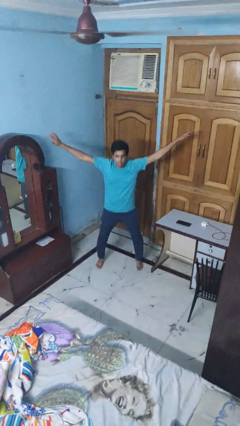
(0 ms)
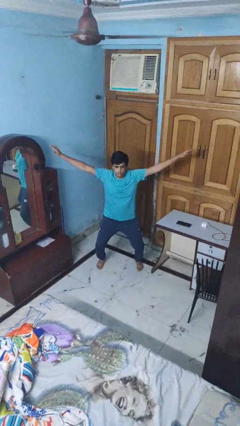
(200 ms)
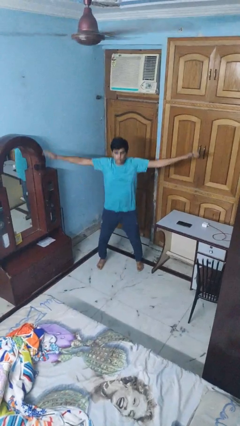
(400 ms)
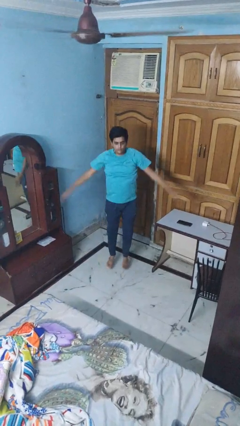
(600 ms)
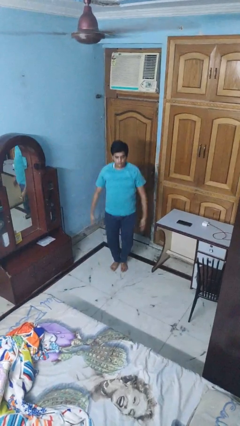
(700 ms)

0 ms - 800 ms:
person exercises with jumping jacks

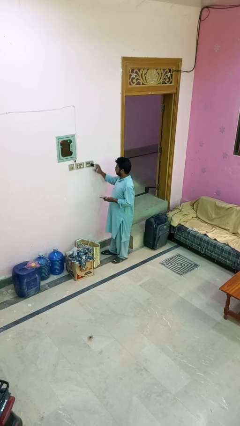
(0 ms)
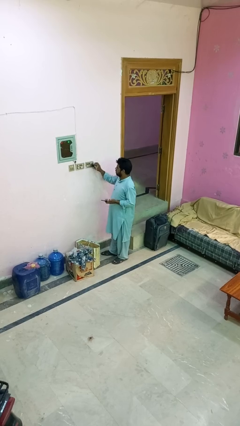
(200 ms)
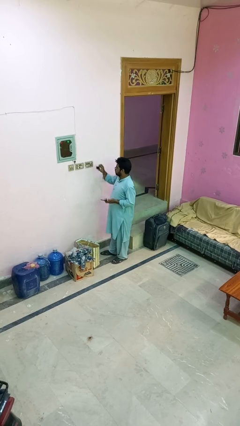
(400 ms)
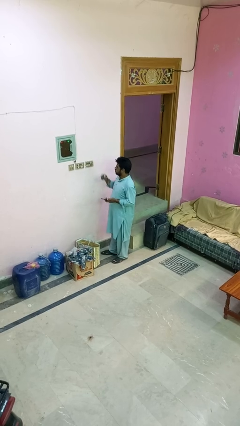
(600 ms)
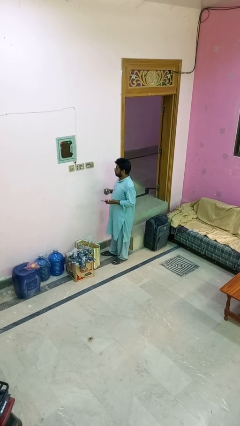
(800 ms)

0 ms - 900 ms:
person unplugs from electrical socket

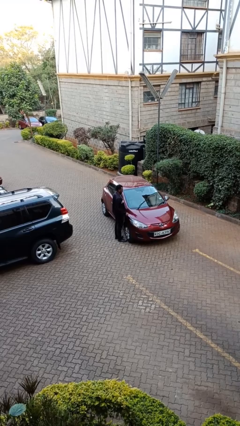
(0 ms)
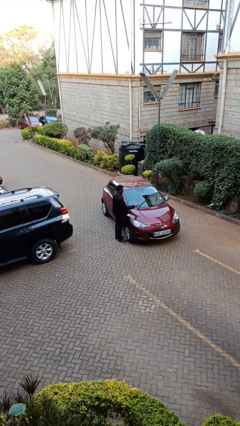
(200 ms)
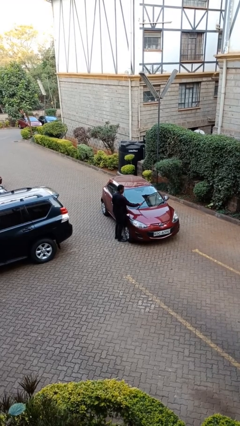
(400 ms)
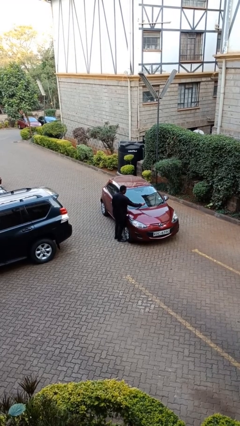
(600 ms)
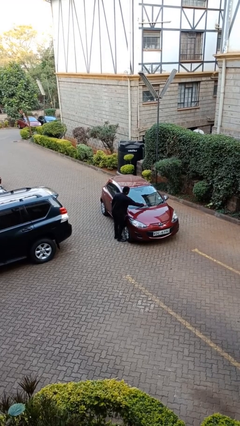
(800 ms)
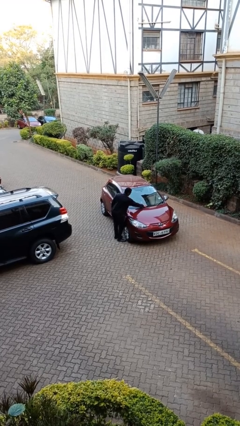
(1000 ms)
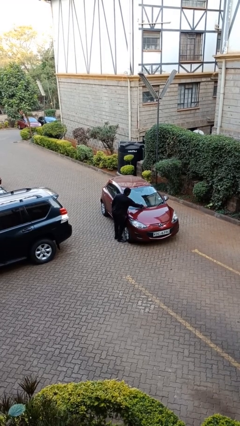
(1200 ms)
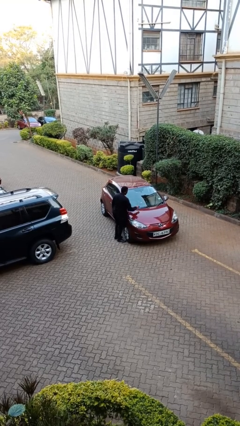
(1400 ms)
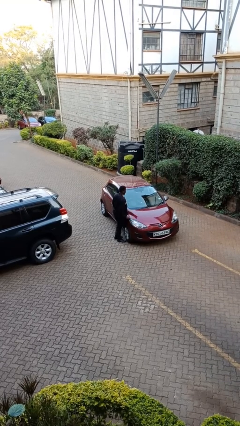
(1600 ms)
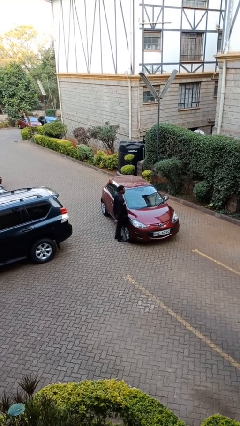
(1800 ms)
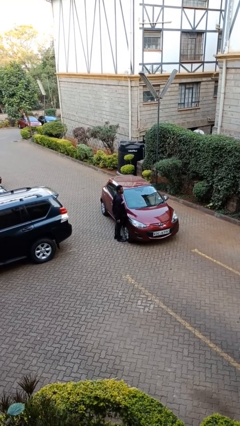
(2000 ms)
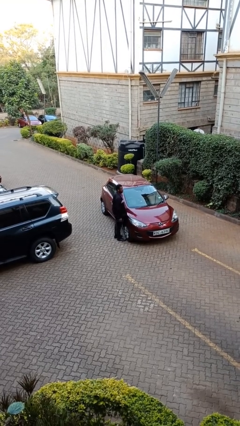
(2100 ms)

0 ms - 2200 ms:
person flips down car wipers

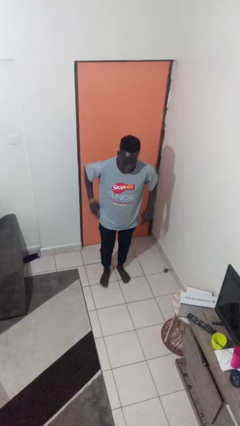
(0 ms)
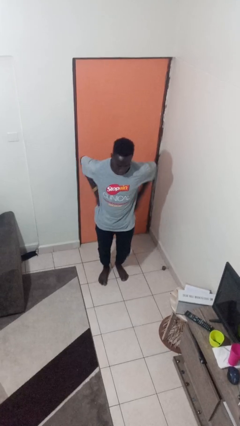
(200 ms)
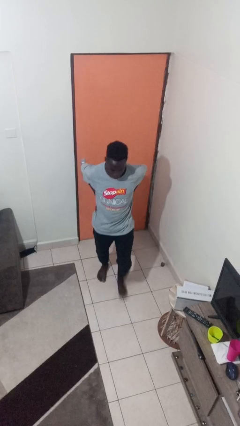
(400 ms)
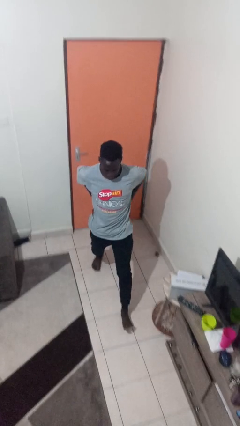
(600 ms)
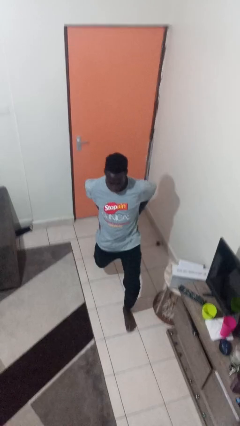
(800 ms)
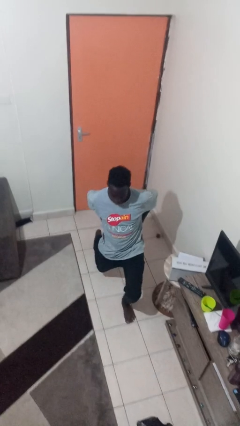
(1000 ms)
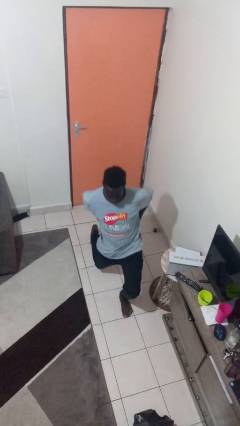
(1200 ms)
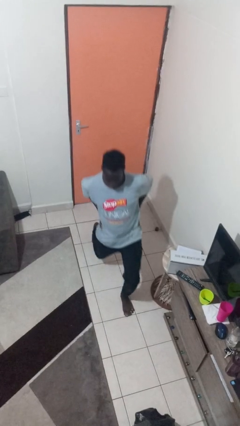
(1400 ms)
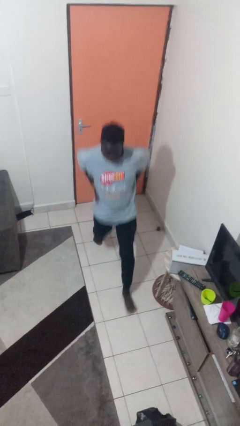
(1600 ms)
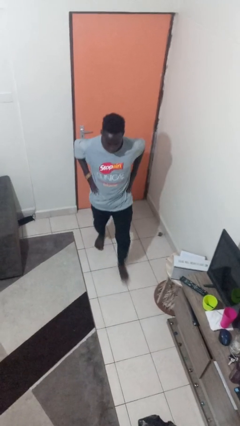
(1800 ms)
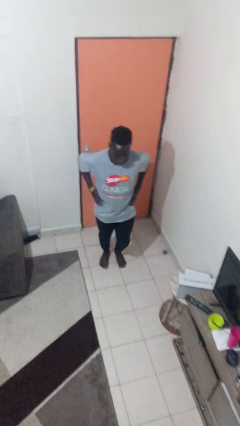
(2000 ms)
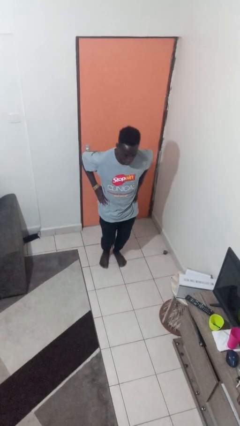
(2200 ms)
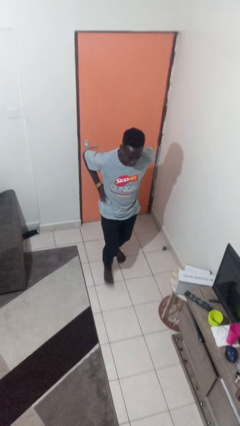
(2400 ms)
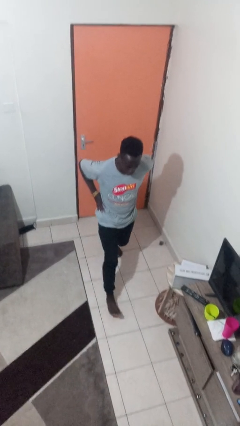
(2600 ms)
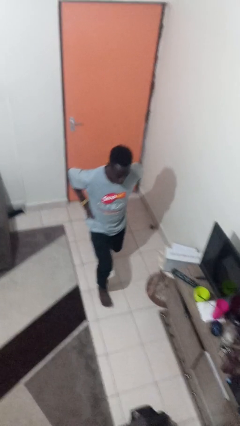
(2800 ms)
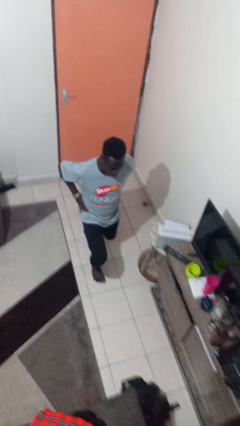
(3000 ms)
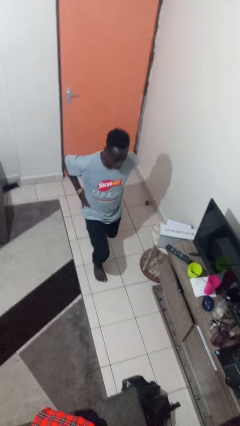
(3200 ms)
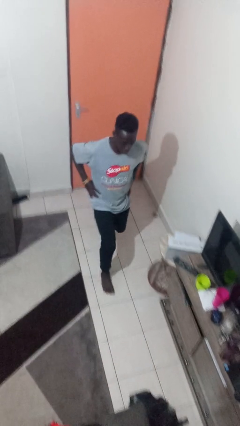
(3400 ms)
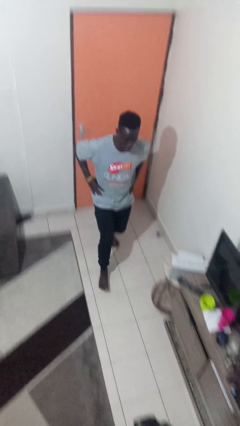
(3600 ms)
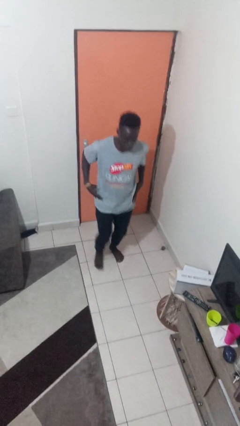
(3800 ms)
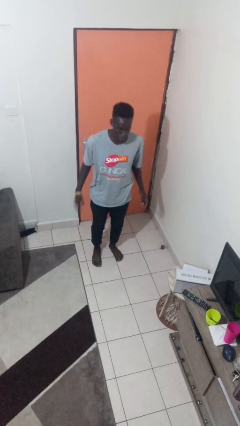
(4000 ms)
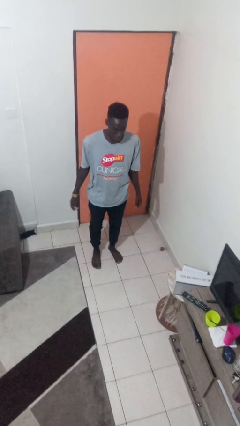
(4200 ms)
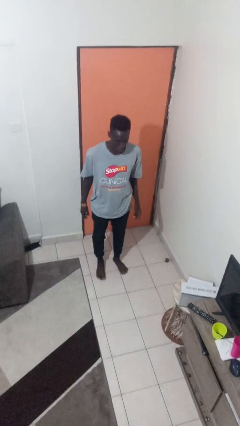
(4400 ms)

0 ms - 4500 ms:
person exercises with lunges

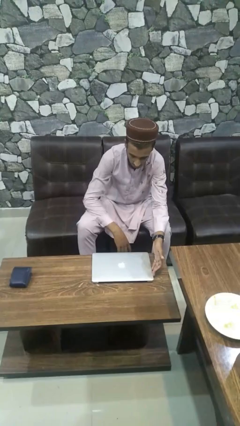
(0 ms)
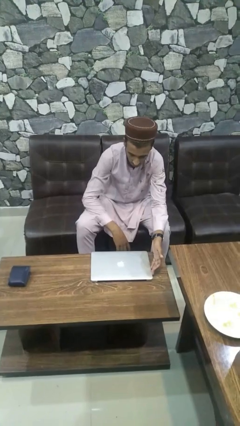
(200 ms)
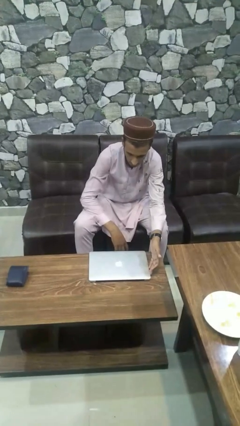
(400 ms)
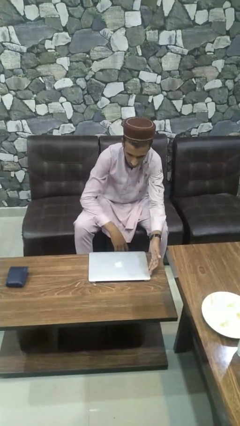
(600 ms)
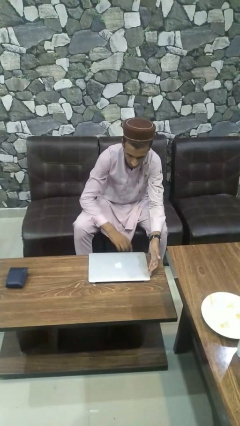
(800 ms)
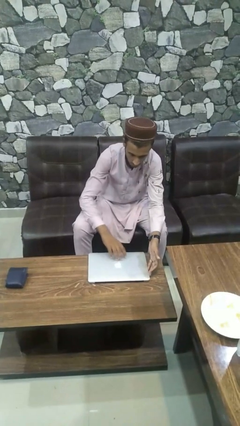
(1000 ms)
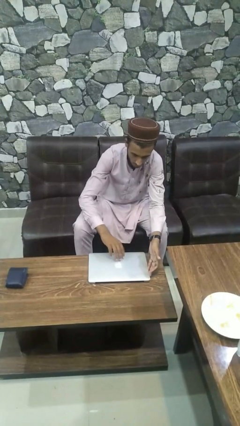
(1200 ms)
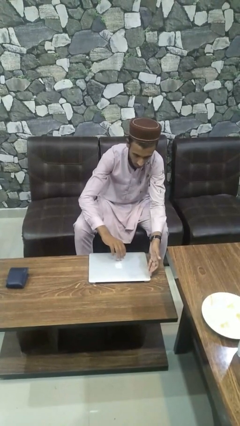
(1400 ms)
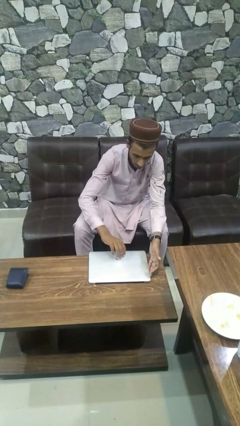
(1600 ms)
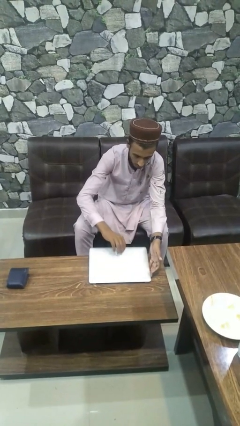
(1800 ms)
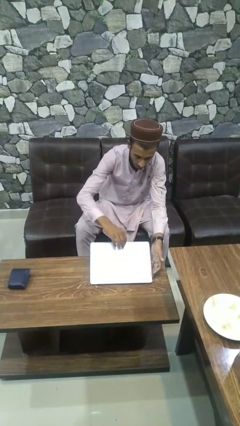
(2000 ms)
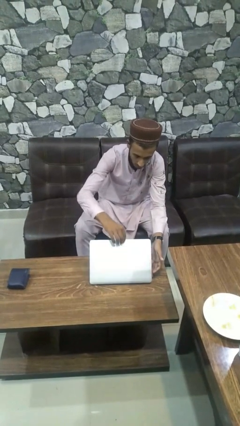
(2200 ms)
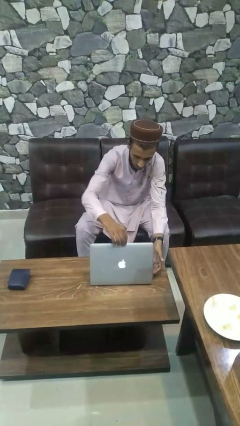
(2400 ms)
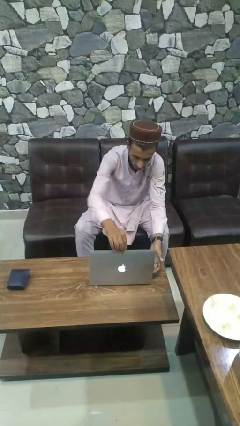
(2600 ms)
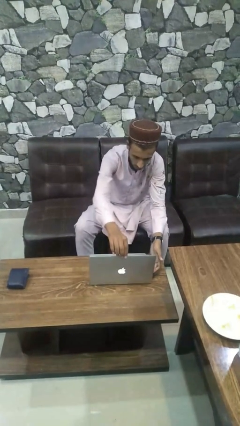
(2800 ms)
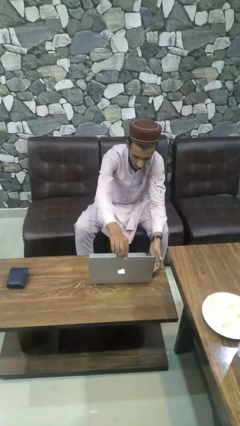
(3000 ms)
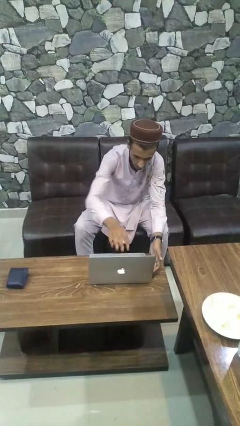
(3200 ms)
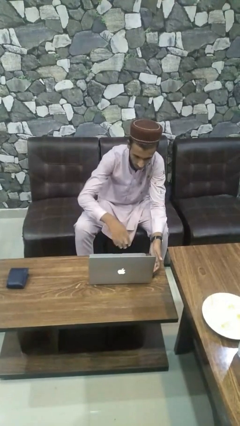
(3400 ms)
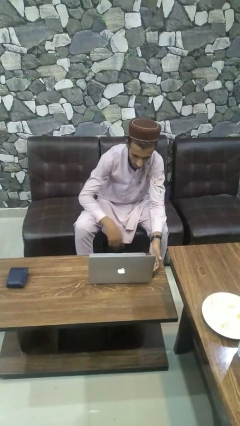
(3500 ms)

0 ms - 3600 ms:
person opens laptop

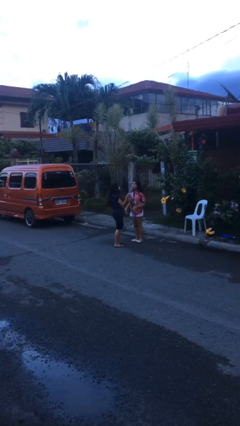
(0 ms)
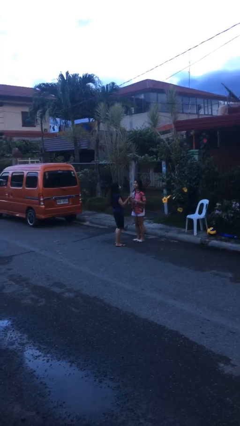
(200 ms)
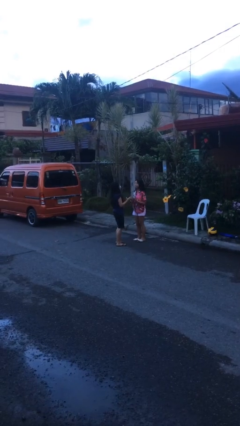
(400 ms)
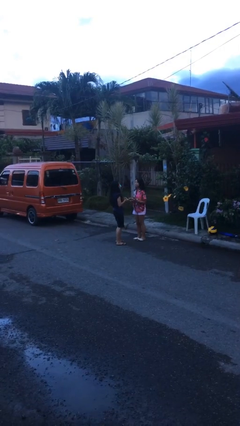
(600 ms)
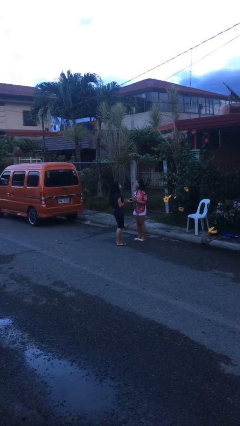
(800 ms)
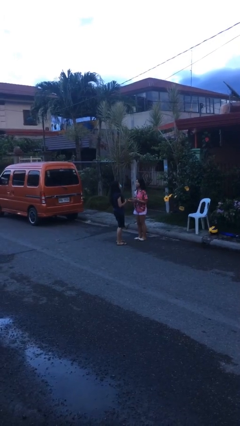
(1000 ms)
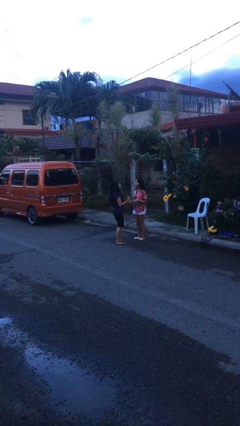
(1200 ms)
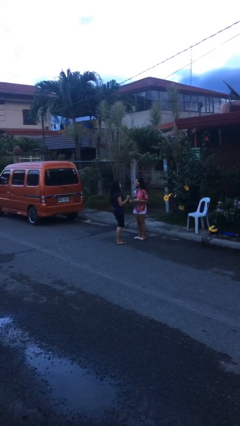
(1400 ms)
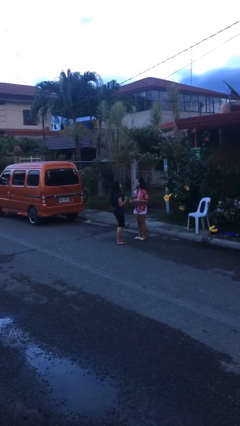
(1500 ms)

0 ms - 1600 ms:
person talks to person

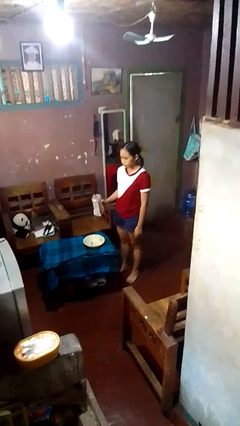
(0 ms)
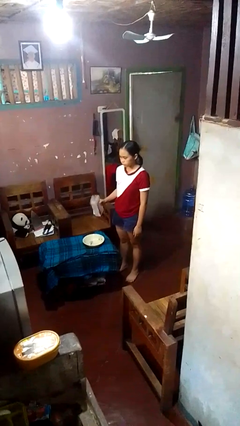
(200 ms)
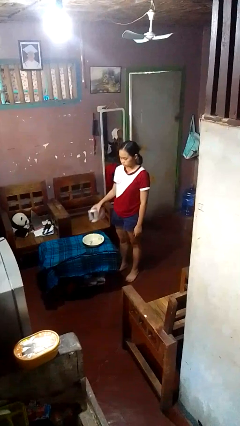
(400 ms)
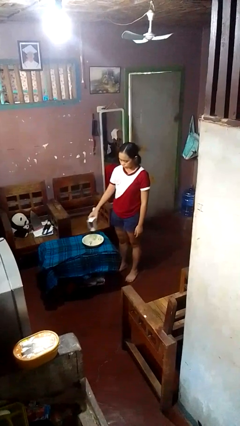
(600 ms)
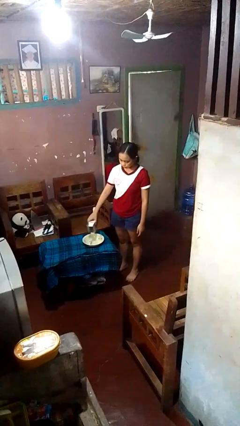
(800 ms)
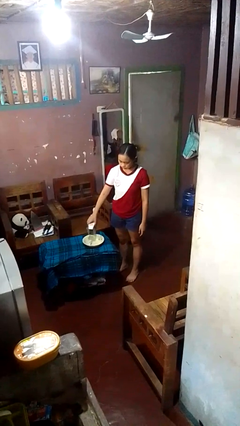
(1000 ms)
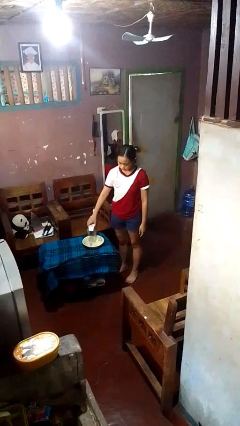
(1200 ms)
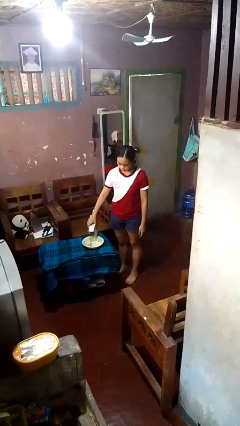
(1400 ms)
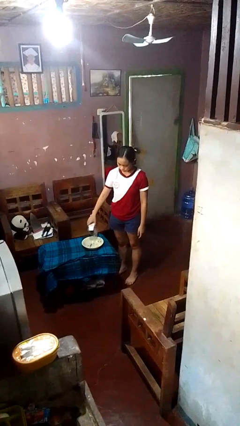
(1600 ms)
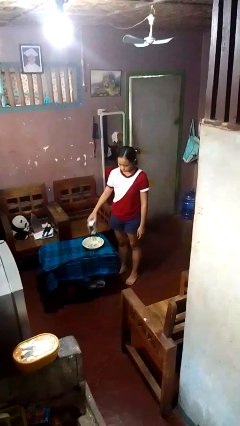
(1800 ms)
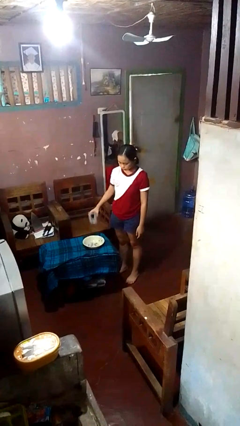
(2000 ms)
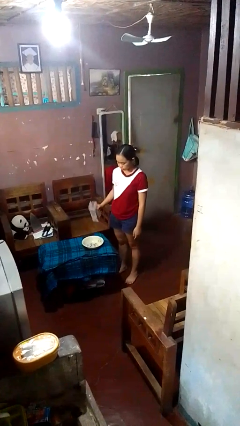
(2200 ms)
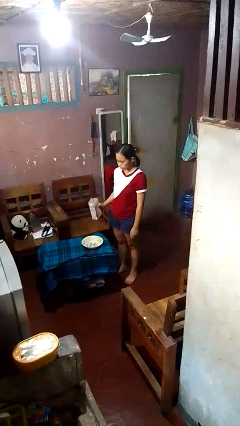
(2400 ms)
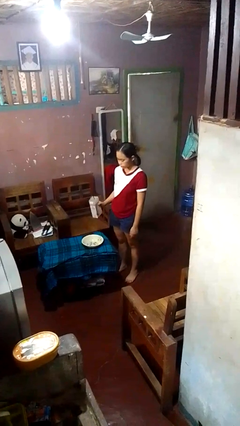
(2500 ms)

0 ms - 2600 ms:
person pours into bowl

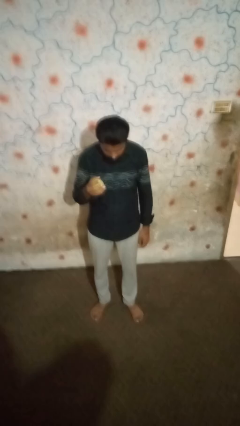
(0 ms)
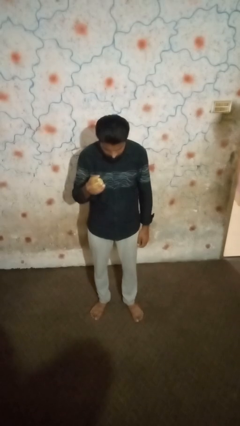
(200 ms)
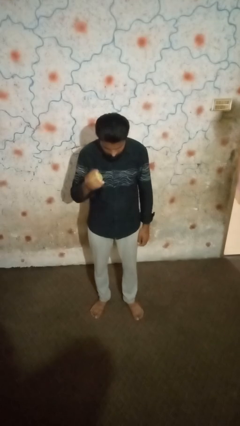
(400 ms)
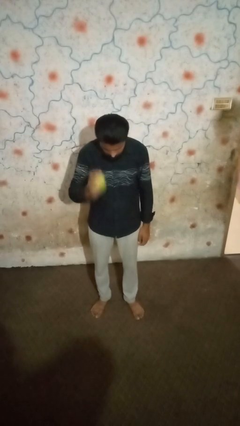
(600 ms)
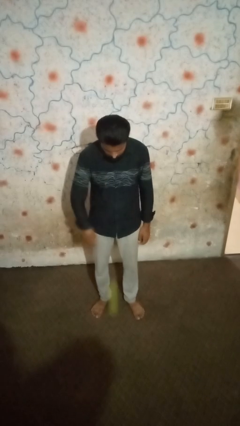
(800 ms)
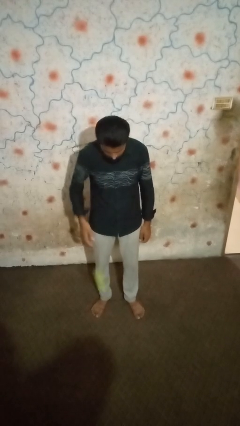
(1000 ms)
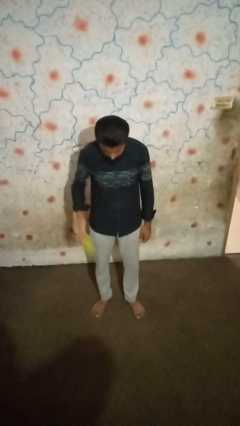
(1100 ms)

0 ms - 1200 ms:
person bounces ball on floor
